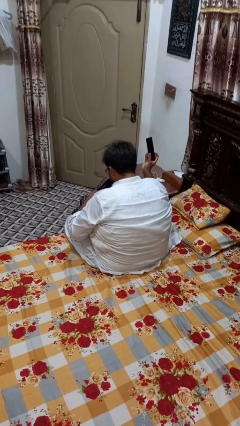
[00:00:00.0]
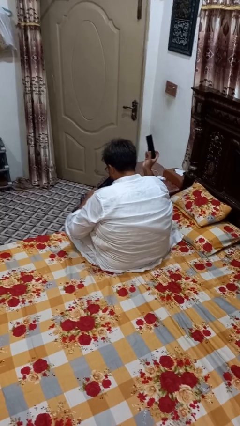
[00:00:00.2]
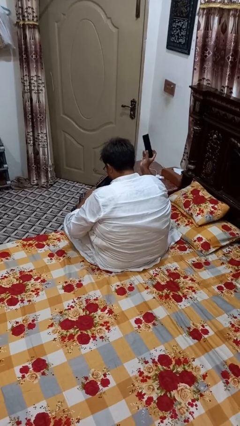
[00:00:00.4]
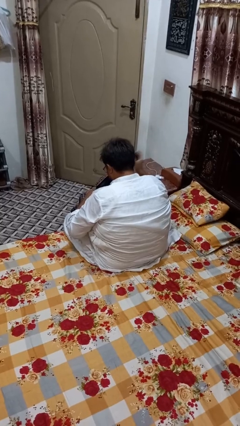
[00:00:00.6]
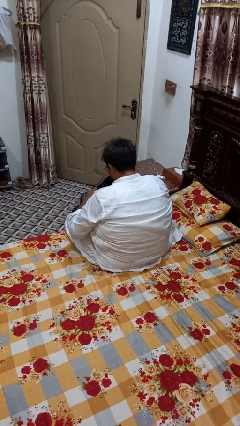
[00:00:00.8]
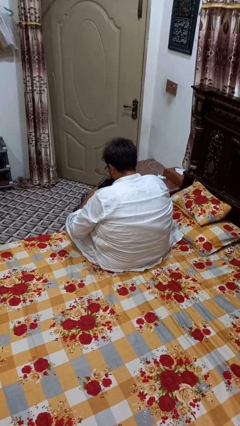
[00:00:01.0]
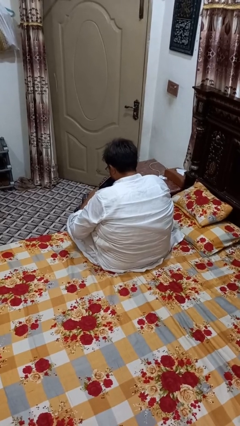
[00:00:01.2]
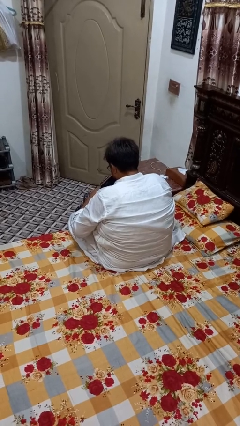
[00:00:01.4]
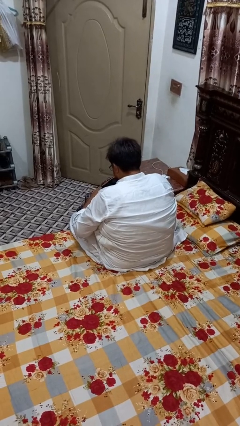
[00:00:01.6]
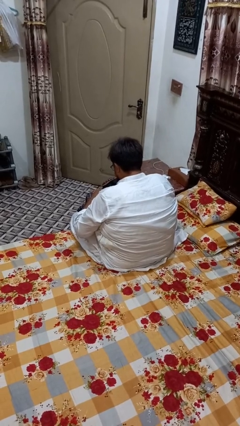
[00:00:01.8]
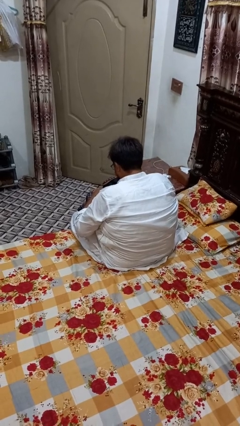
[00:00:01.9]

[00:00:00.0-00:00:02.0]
person puts object into bag

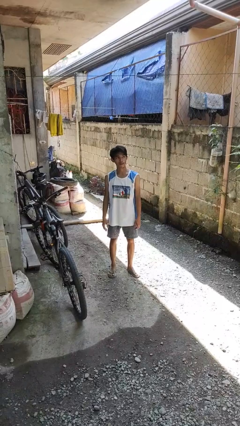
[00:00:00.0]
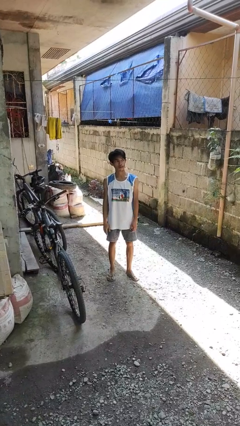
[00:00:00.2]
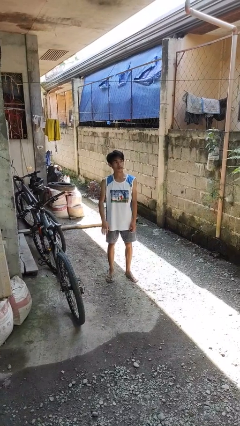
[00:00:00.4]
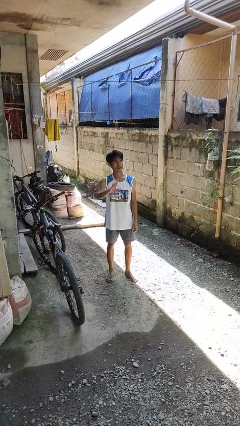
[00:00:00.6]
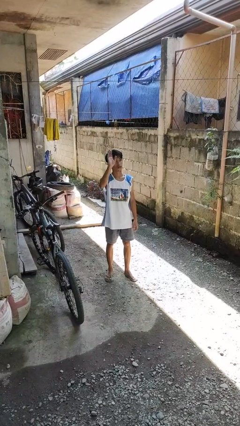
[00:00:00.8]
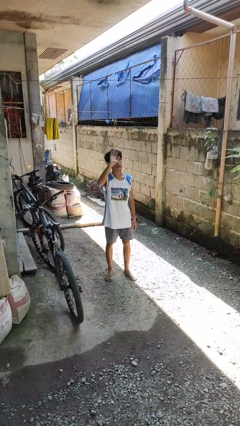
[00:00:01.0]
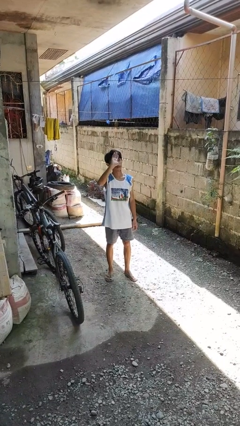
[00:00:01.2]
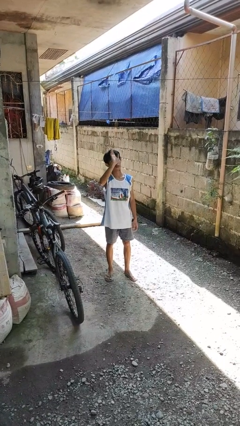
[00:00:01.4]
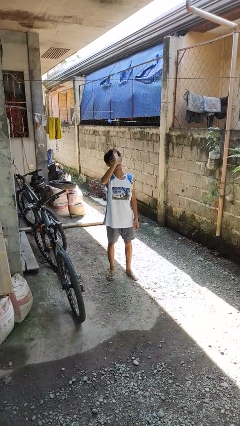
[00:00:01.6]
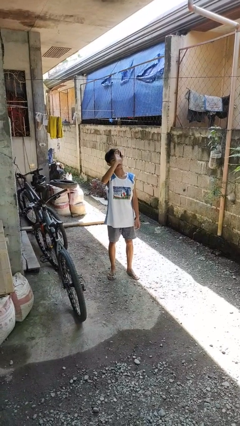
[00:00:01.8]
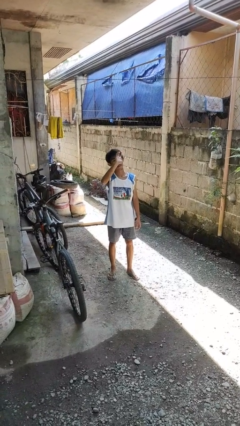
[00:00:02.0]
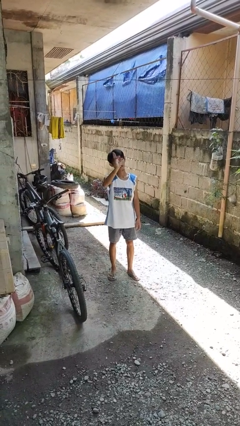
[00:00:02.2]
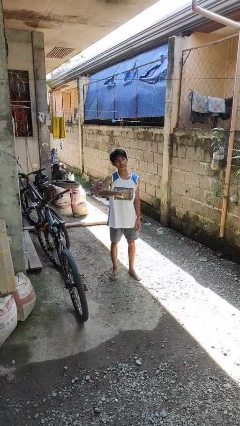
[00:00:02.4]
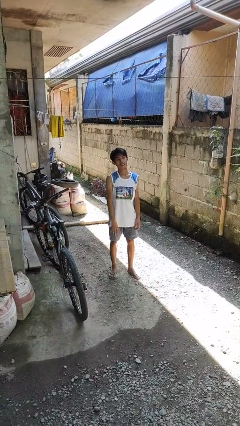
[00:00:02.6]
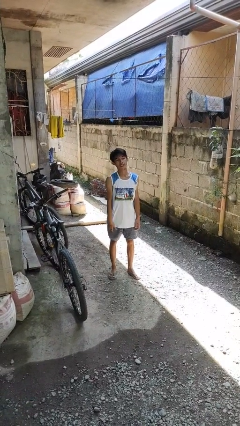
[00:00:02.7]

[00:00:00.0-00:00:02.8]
person waves at person

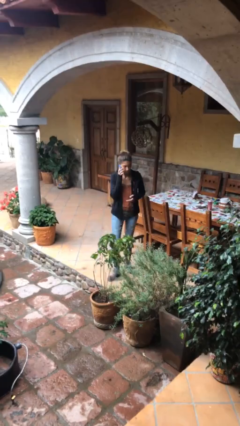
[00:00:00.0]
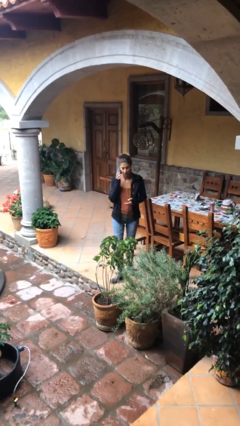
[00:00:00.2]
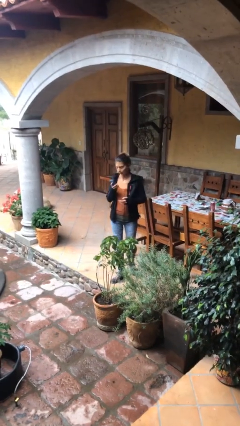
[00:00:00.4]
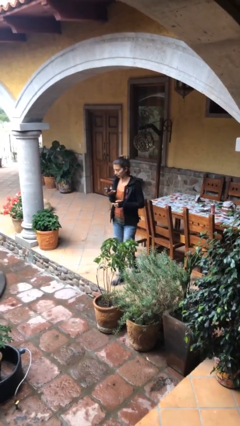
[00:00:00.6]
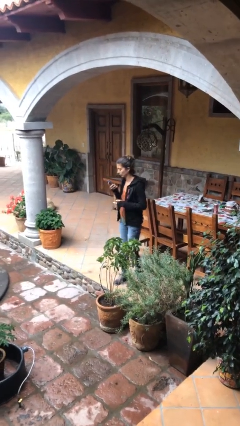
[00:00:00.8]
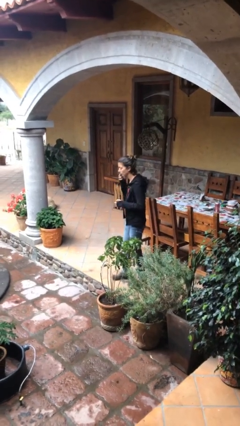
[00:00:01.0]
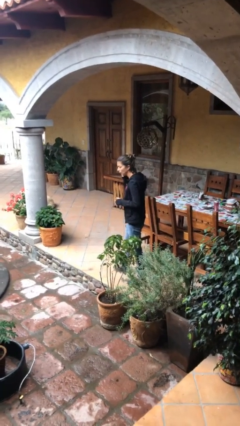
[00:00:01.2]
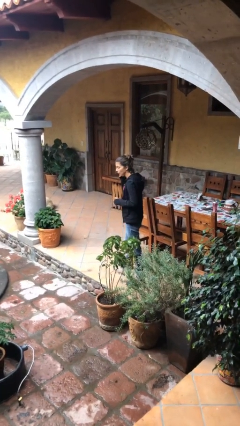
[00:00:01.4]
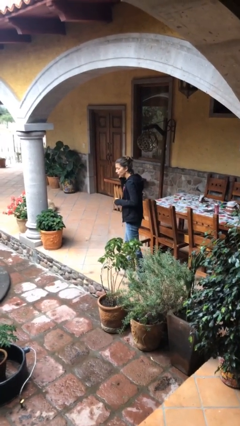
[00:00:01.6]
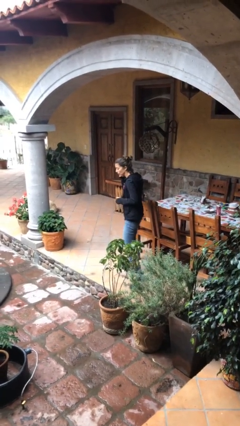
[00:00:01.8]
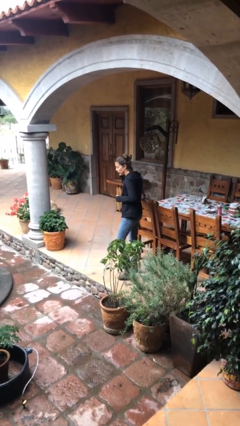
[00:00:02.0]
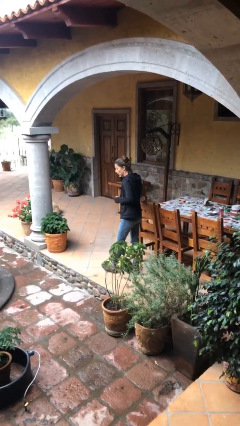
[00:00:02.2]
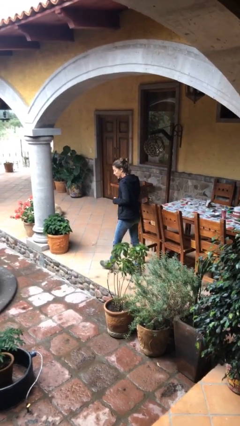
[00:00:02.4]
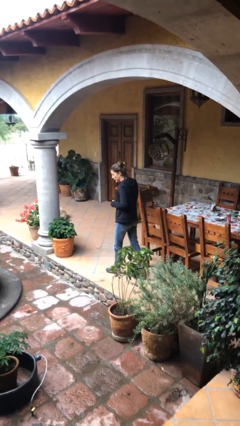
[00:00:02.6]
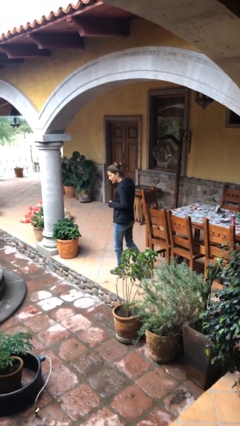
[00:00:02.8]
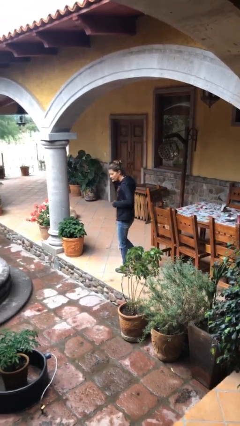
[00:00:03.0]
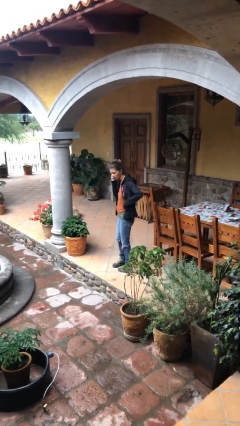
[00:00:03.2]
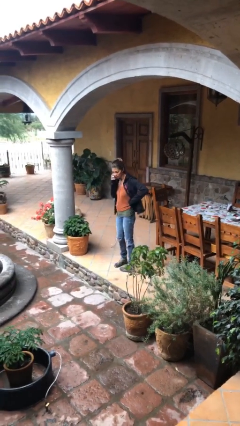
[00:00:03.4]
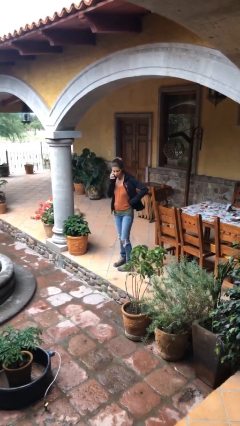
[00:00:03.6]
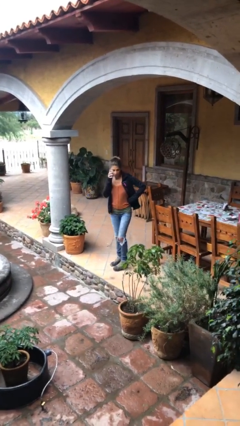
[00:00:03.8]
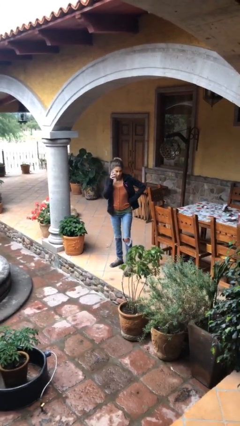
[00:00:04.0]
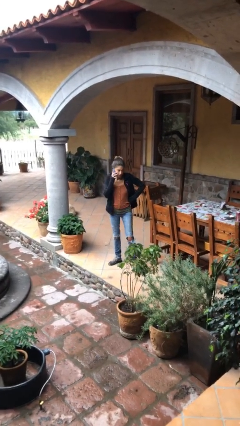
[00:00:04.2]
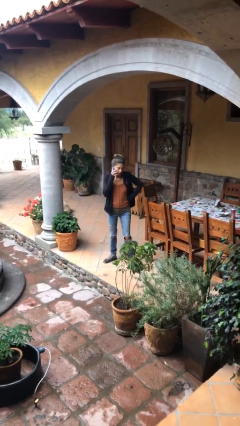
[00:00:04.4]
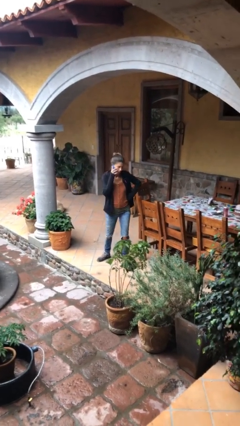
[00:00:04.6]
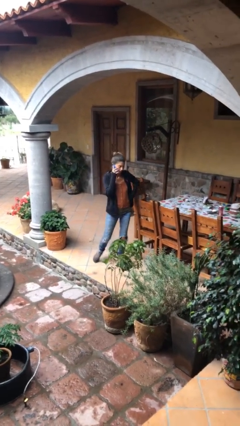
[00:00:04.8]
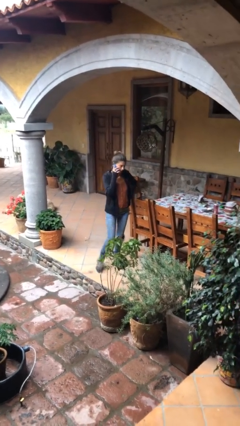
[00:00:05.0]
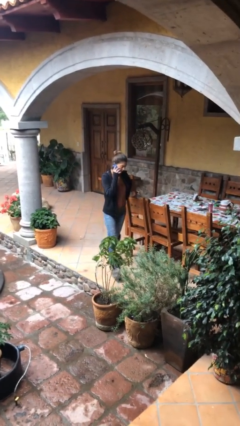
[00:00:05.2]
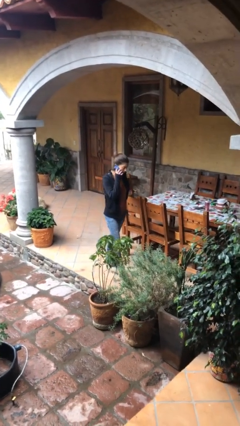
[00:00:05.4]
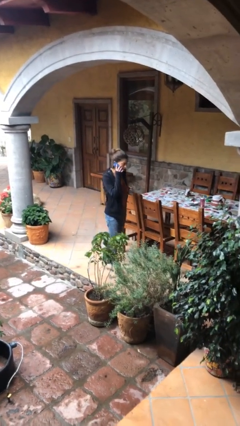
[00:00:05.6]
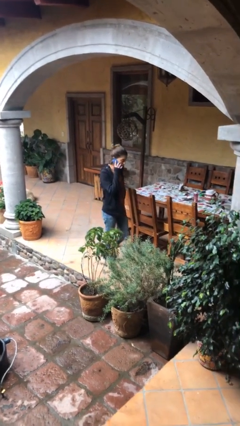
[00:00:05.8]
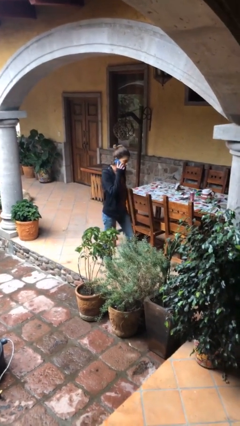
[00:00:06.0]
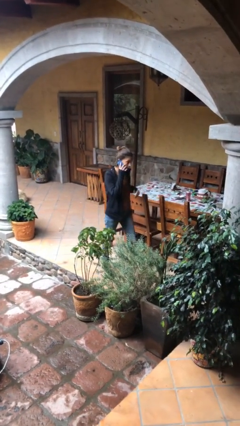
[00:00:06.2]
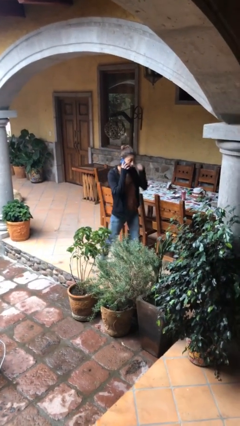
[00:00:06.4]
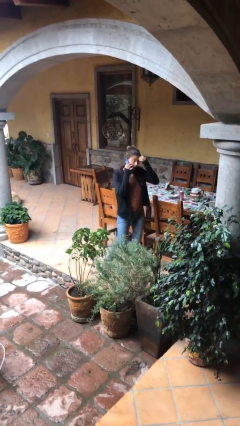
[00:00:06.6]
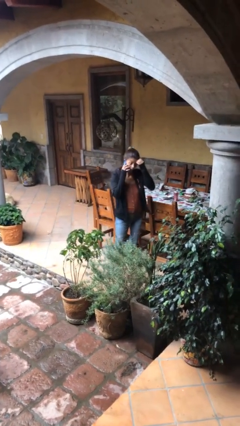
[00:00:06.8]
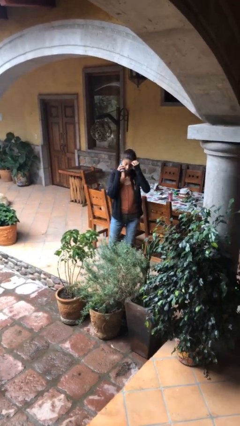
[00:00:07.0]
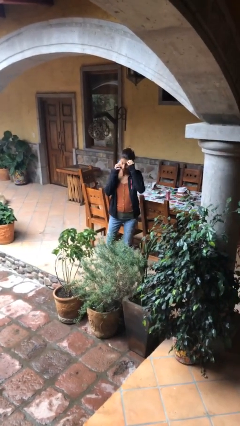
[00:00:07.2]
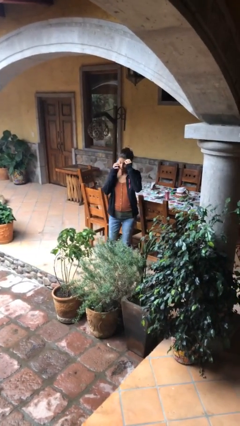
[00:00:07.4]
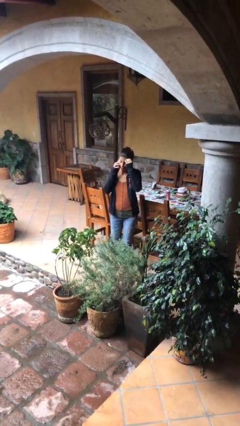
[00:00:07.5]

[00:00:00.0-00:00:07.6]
person talks on phone

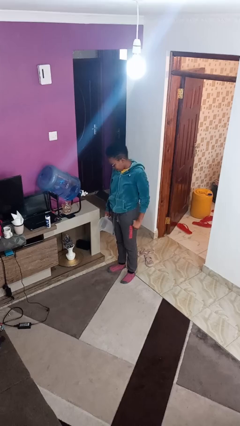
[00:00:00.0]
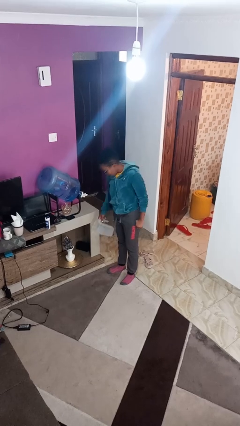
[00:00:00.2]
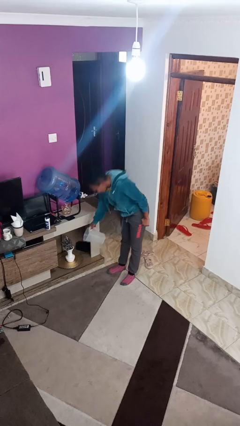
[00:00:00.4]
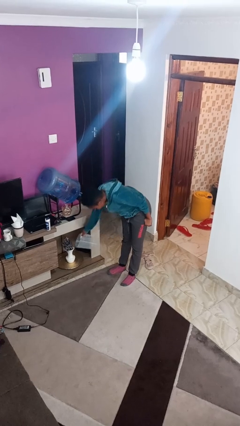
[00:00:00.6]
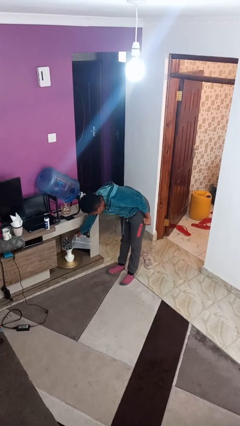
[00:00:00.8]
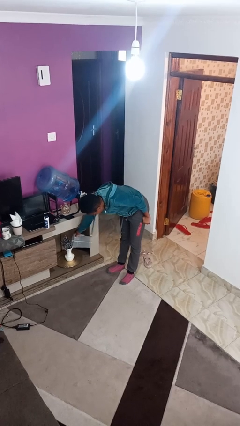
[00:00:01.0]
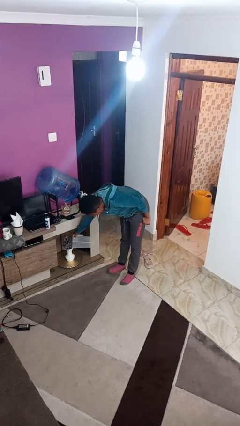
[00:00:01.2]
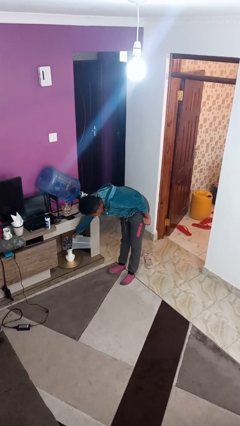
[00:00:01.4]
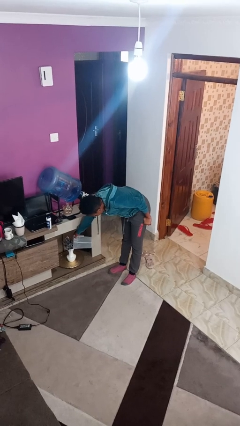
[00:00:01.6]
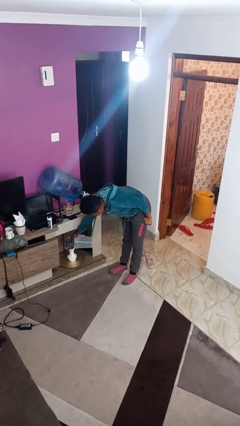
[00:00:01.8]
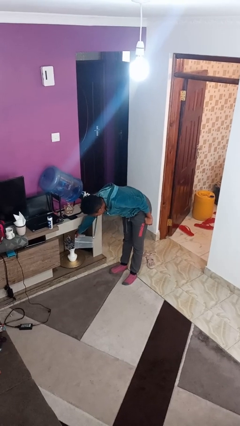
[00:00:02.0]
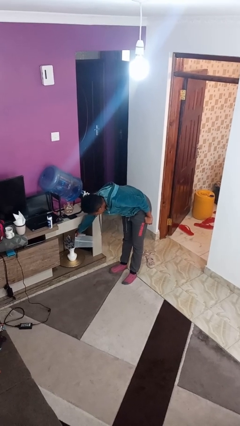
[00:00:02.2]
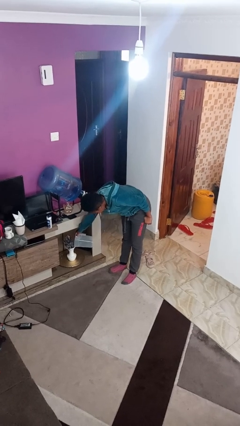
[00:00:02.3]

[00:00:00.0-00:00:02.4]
person waters houseplant

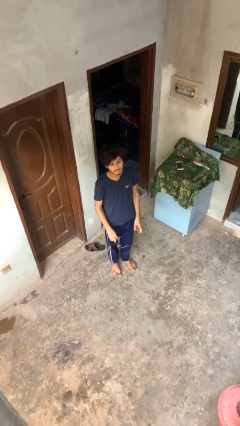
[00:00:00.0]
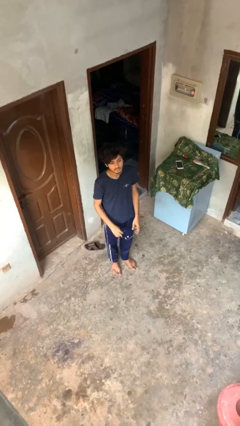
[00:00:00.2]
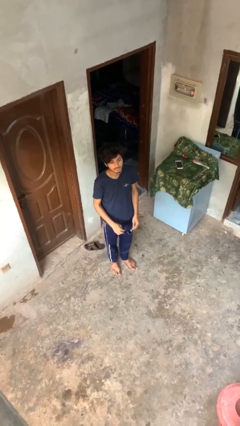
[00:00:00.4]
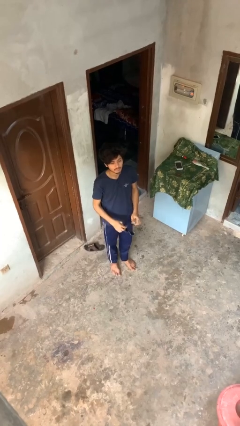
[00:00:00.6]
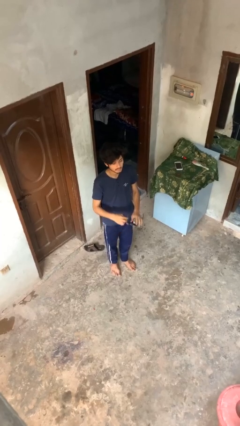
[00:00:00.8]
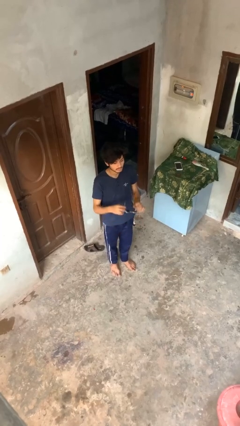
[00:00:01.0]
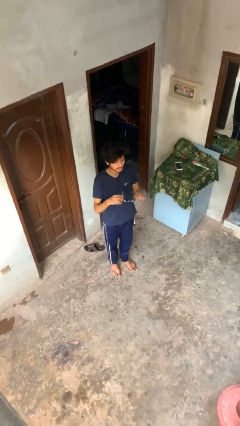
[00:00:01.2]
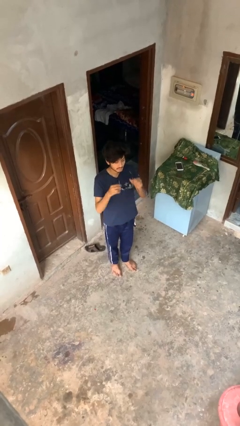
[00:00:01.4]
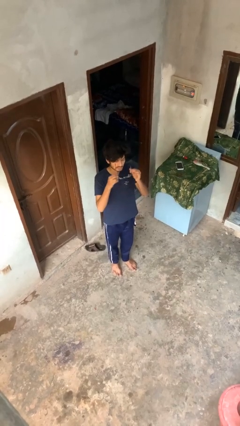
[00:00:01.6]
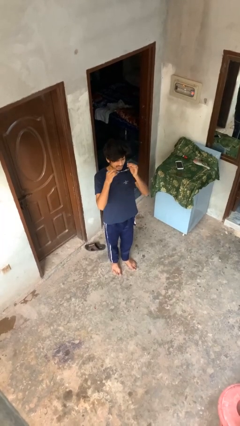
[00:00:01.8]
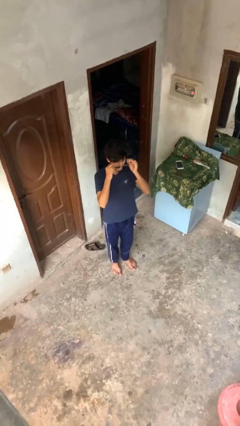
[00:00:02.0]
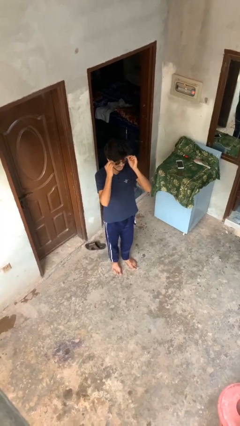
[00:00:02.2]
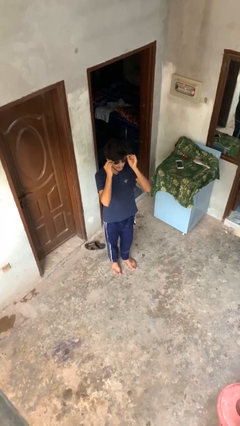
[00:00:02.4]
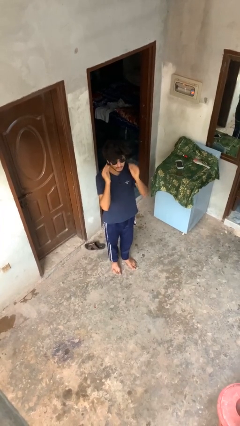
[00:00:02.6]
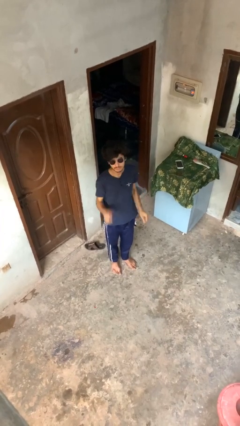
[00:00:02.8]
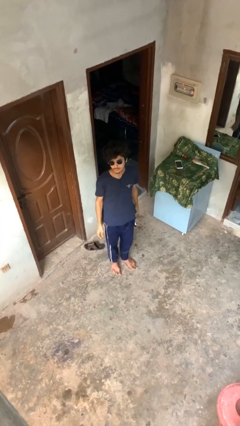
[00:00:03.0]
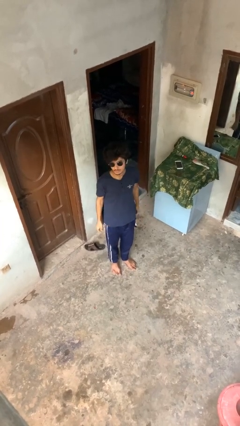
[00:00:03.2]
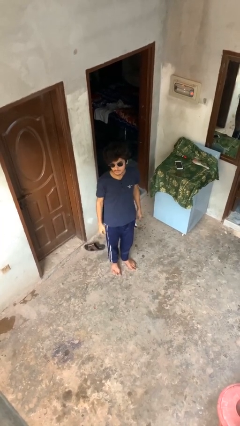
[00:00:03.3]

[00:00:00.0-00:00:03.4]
person puts on sunglasses
